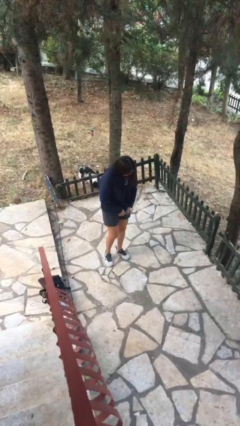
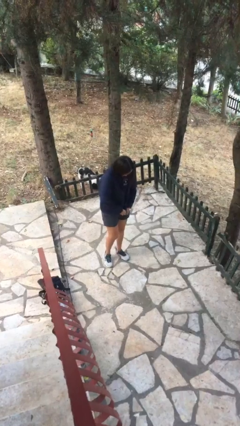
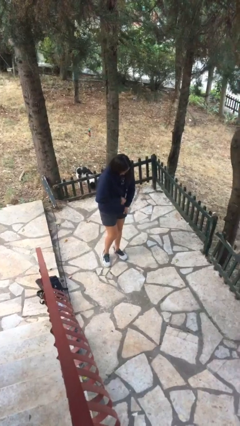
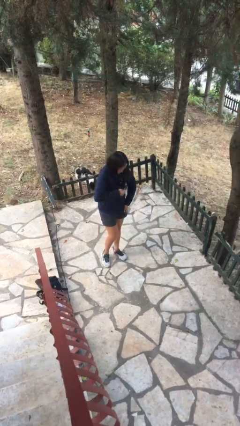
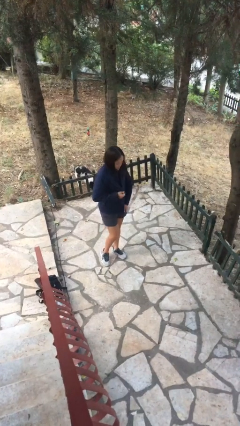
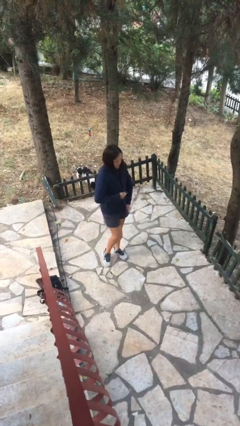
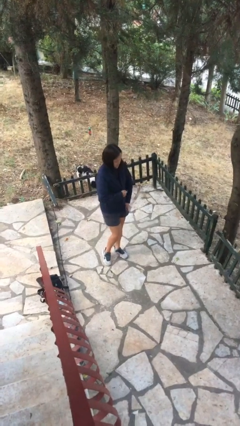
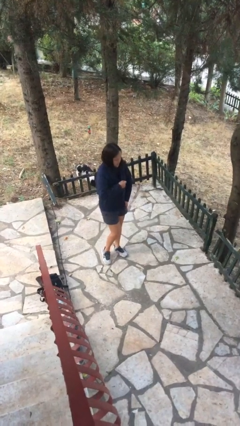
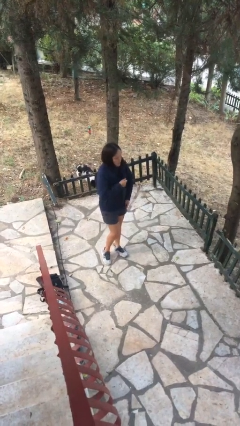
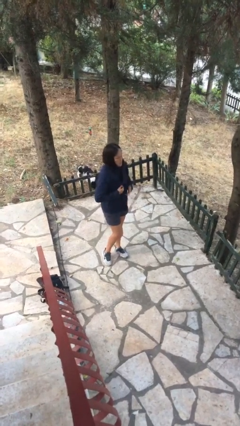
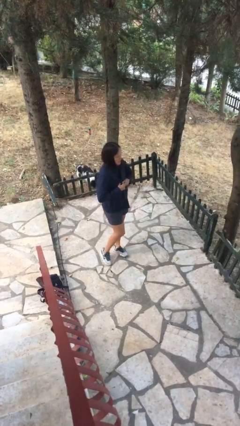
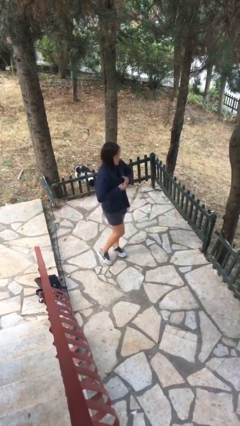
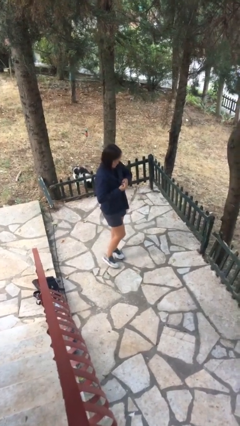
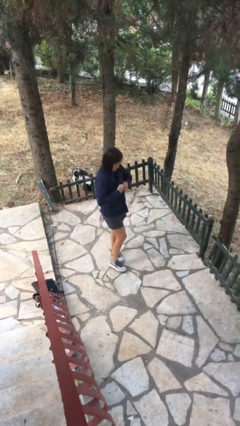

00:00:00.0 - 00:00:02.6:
person zips up jacket

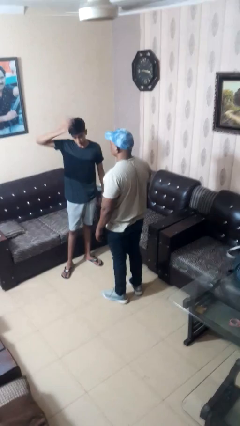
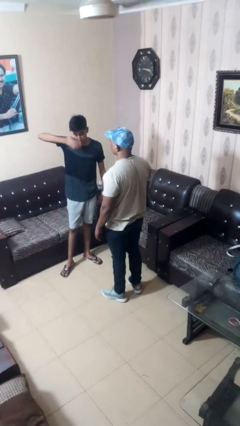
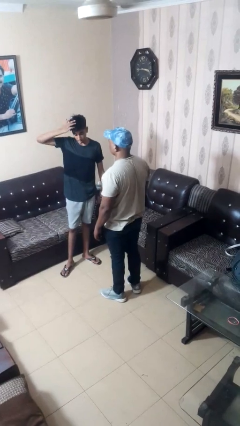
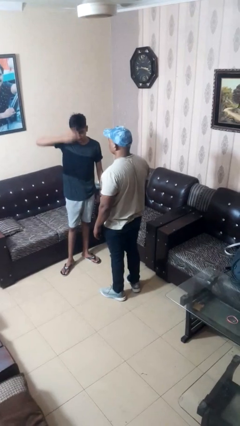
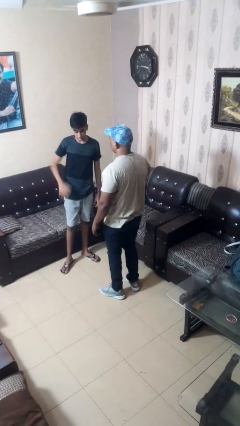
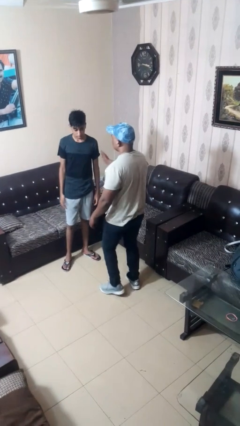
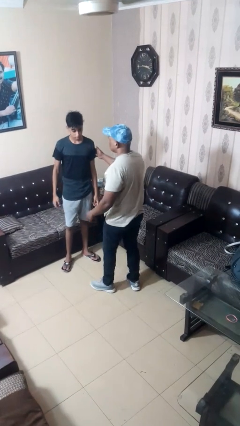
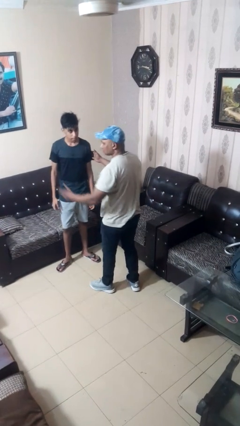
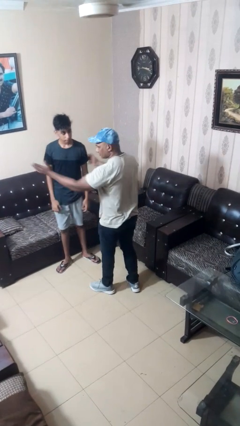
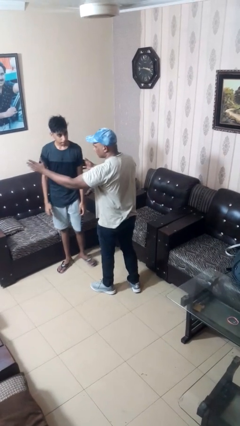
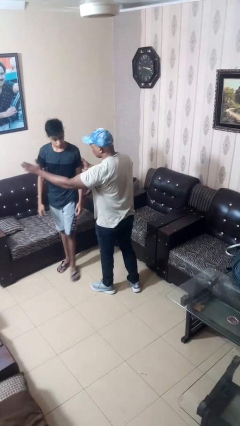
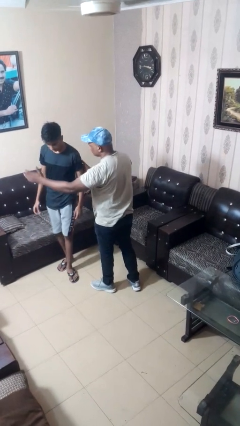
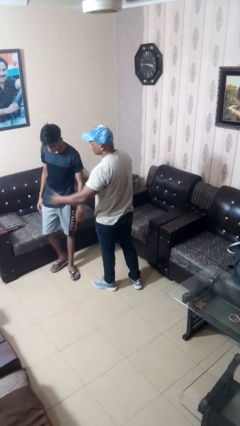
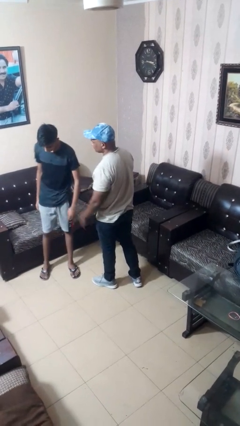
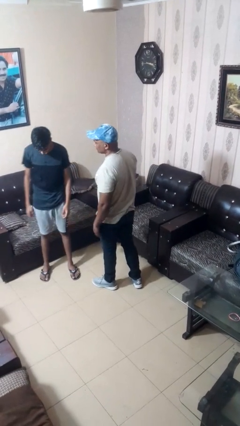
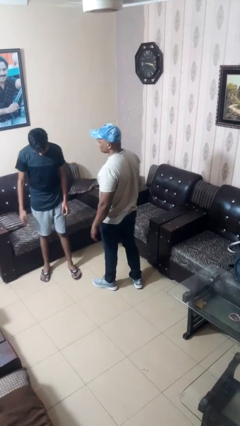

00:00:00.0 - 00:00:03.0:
person shoves person

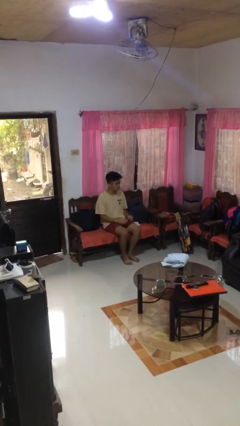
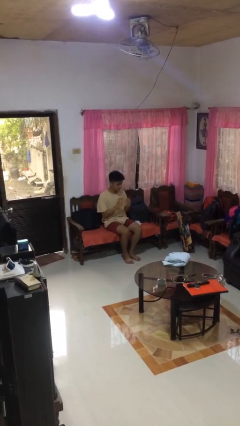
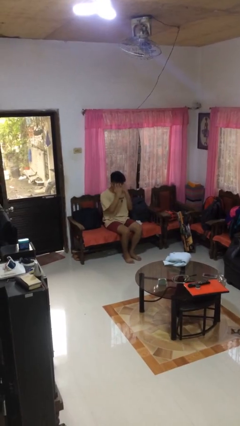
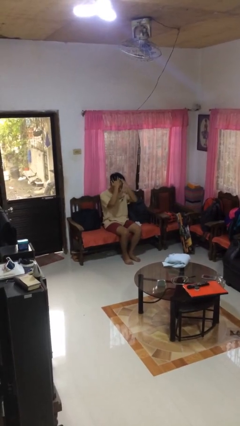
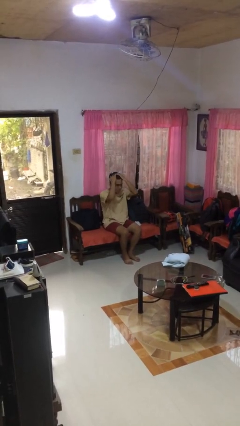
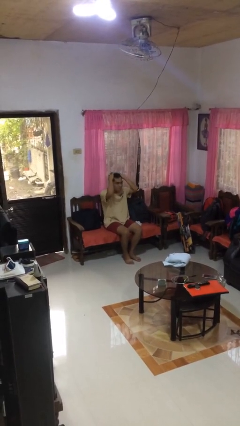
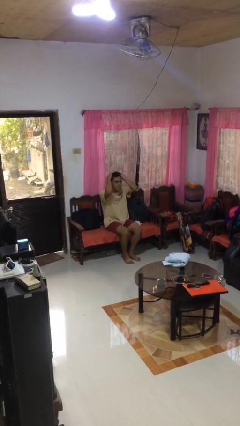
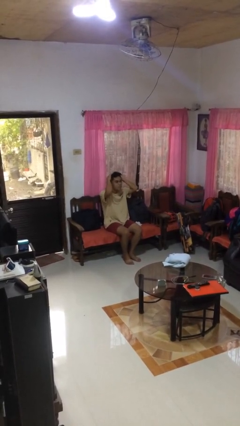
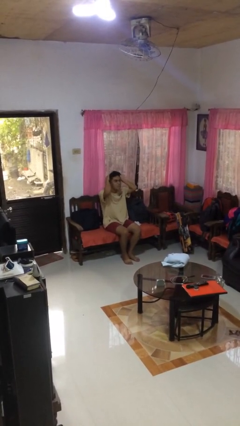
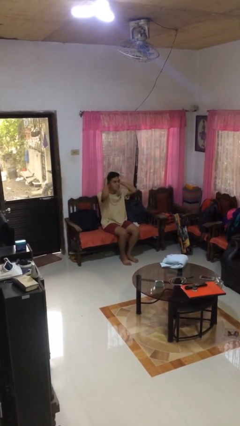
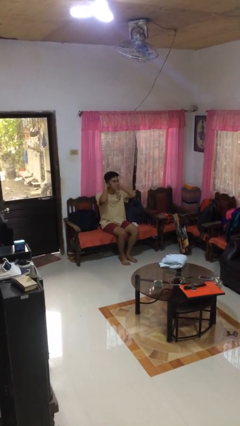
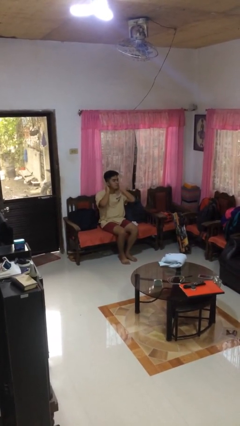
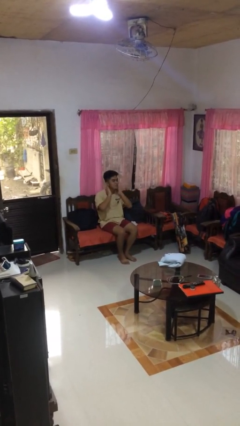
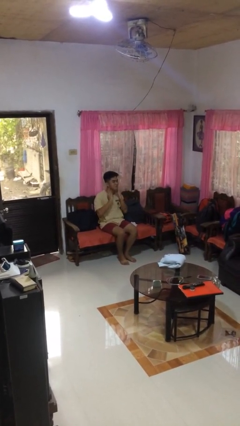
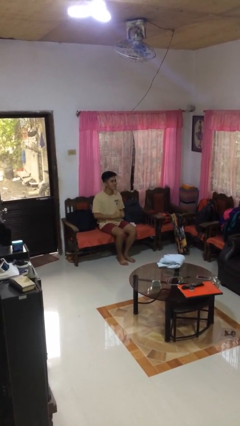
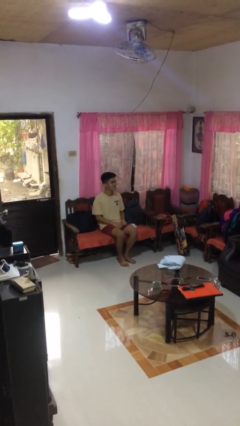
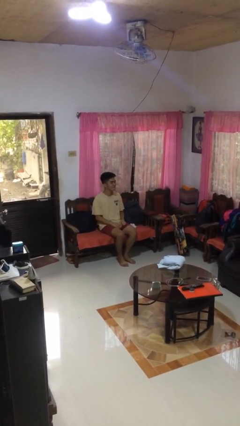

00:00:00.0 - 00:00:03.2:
person strokes hair

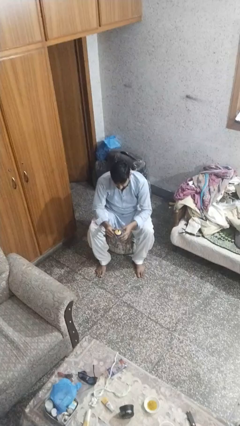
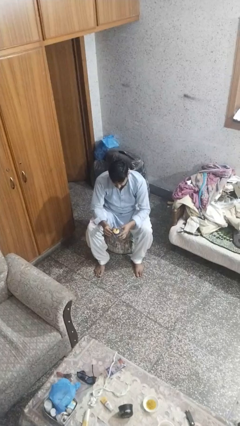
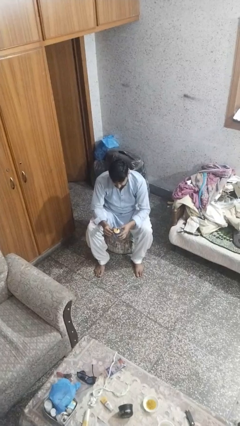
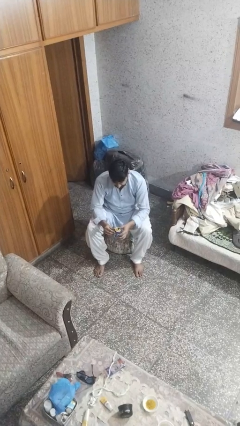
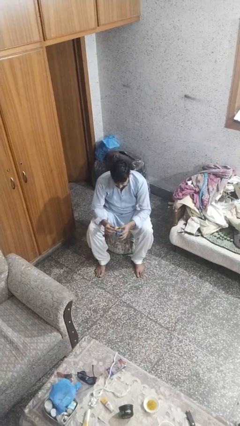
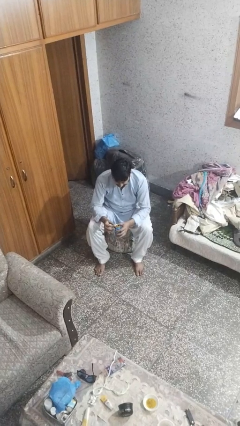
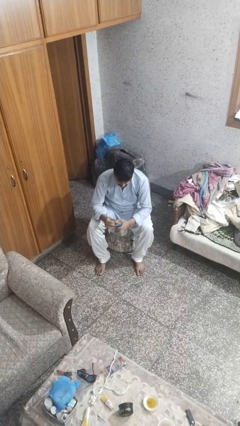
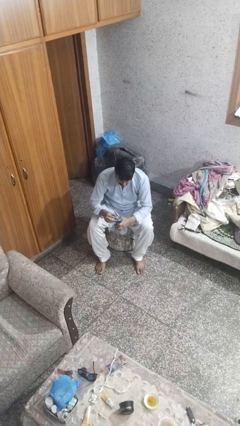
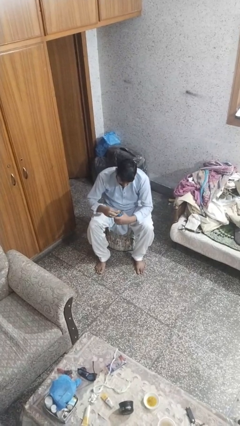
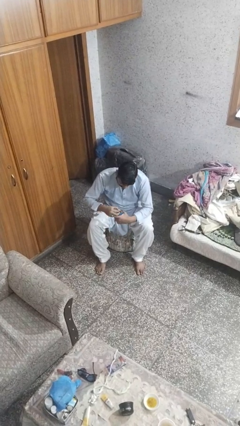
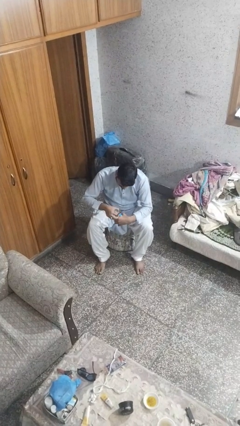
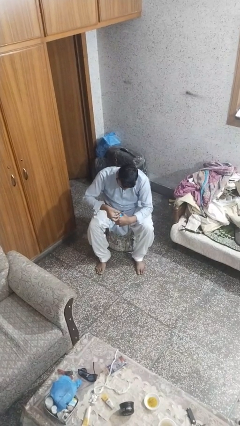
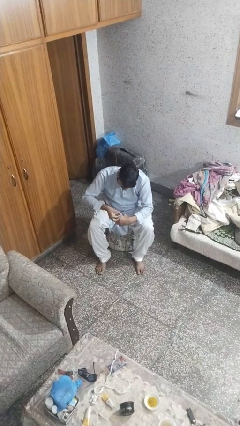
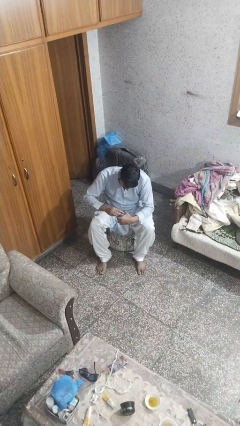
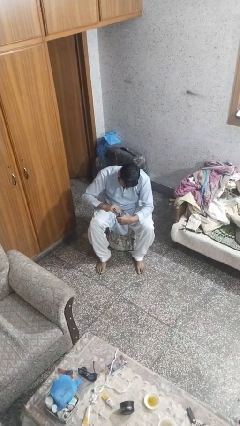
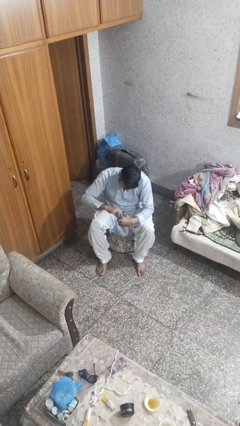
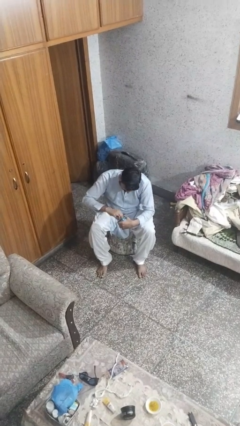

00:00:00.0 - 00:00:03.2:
person opens beverage can

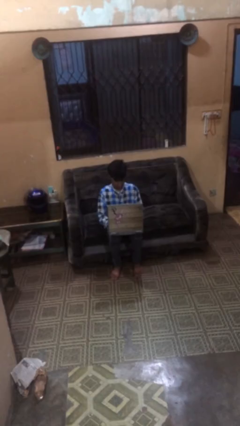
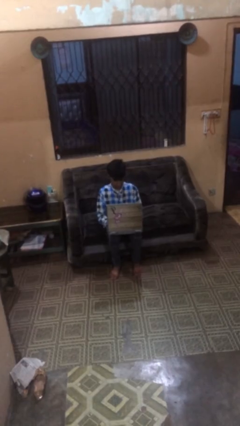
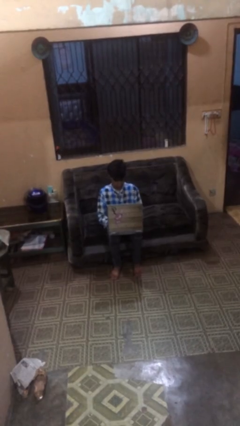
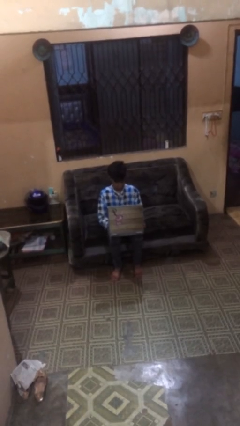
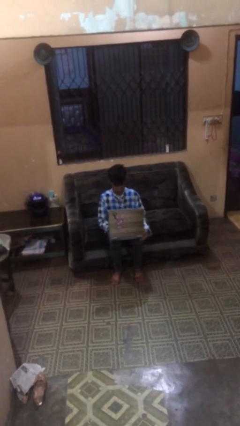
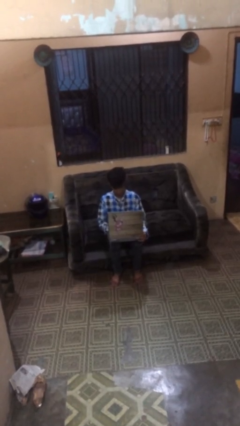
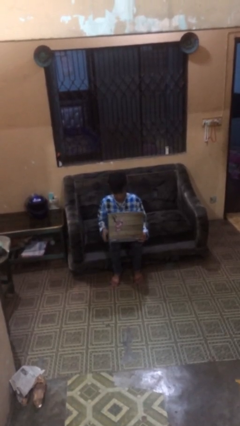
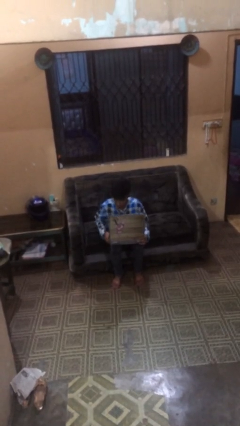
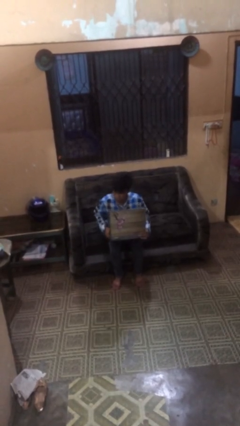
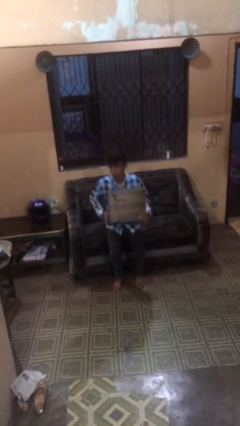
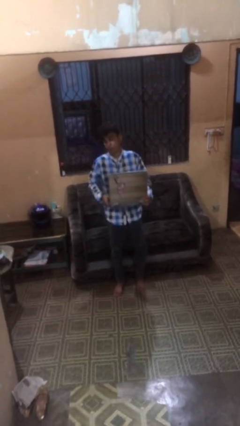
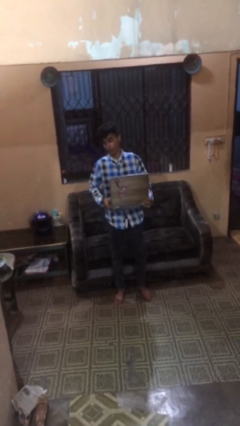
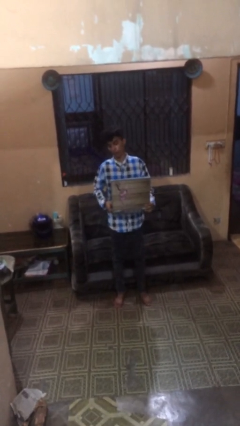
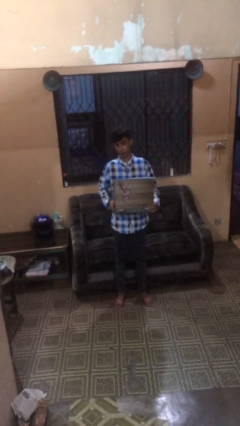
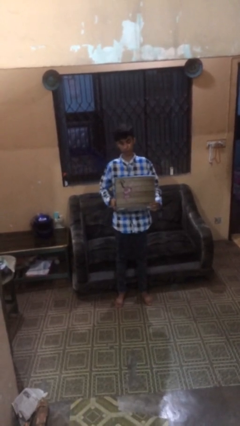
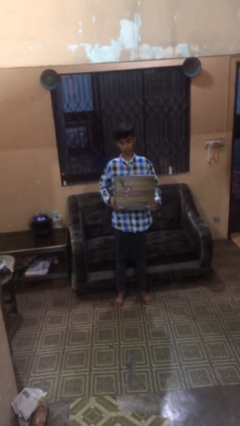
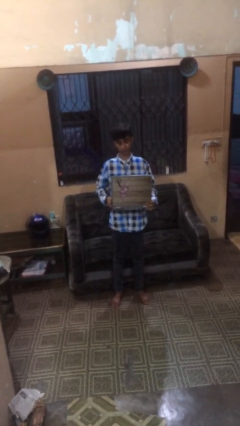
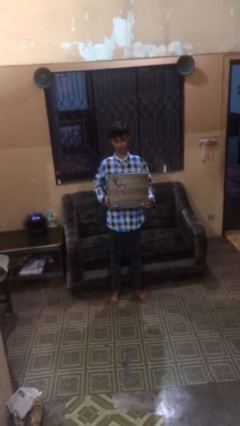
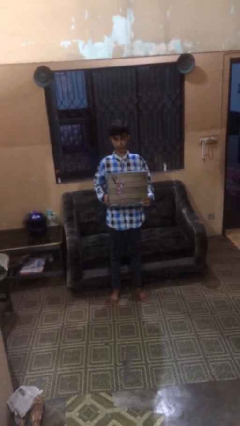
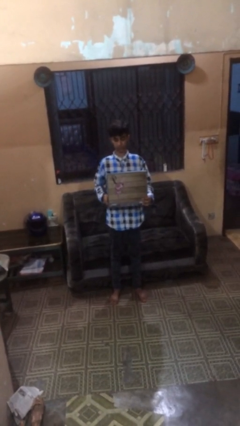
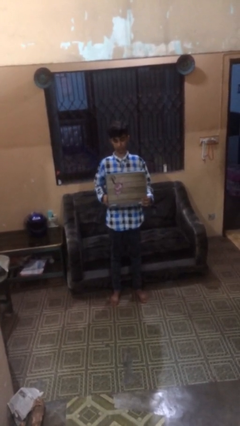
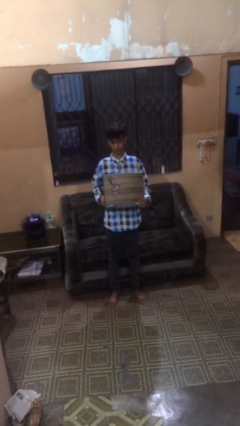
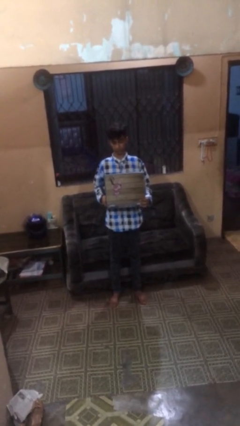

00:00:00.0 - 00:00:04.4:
person stands up

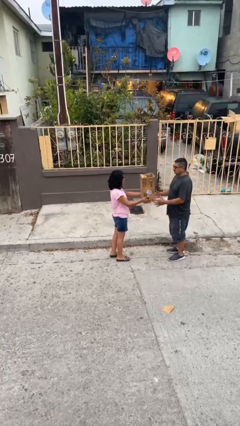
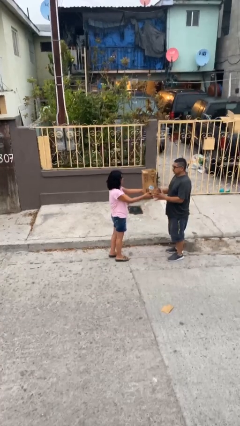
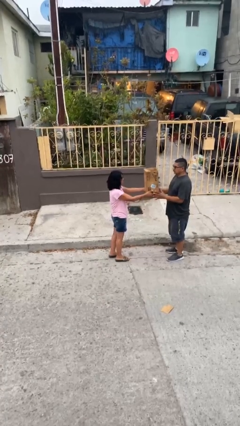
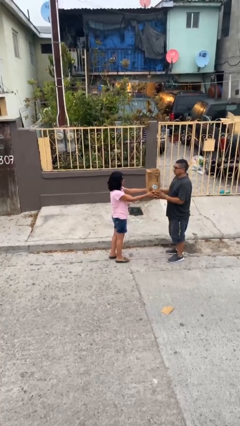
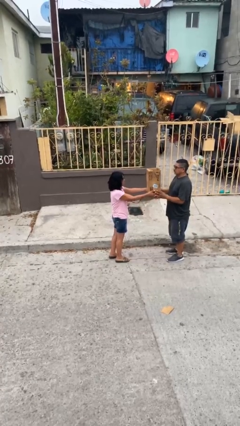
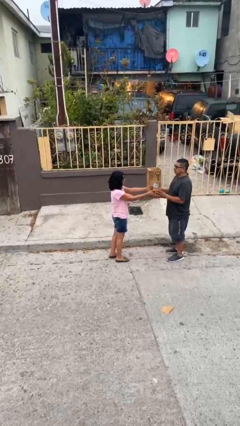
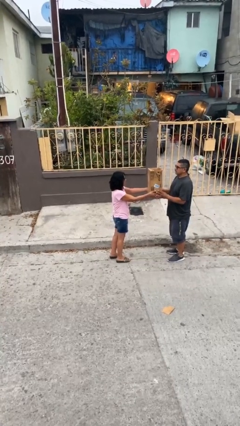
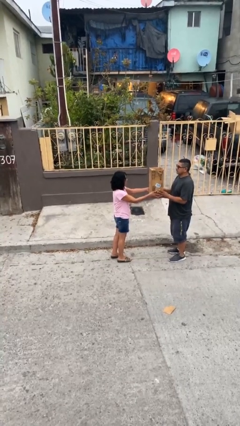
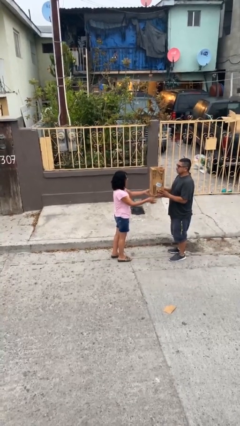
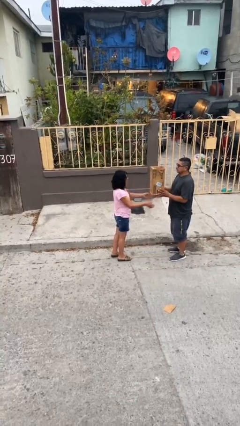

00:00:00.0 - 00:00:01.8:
person transfers object to person
